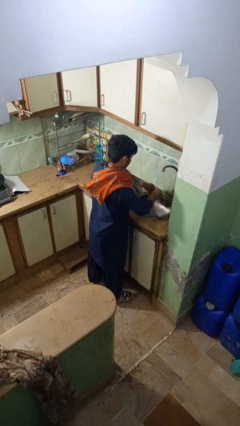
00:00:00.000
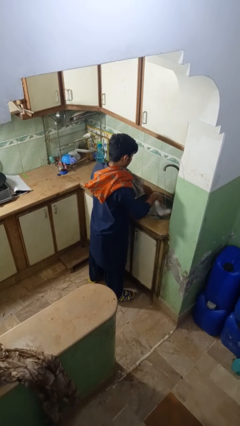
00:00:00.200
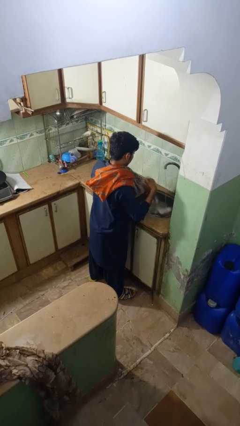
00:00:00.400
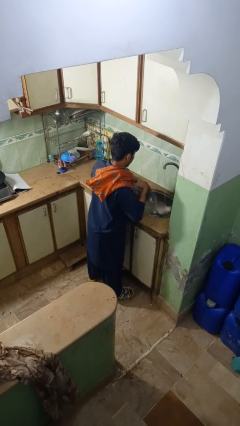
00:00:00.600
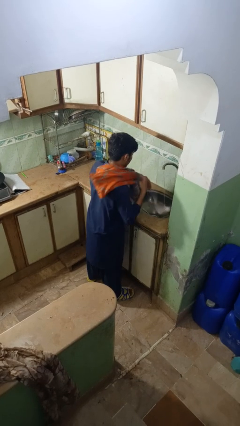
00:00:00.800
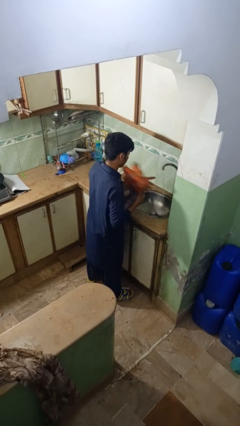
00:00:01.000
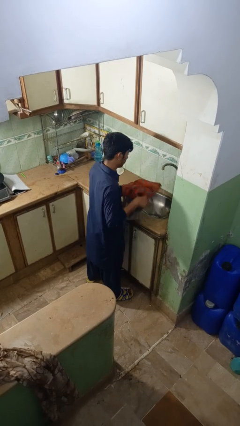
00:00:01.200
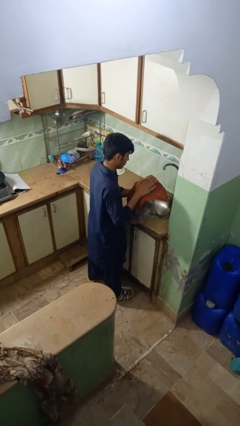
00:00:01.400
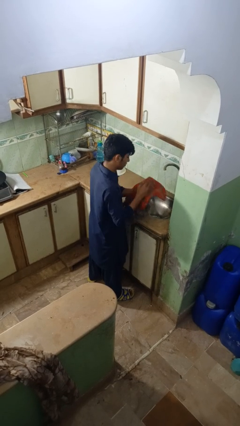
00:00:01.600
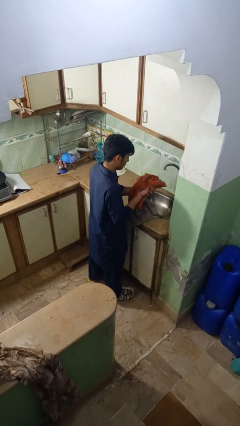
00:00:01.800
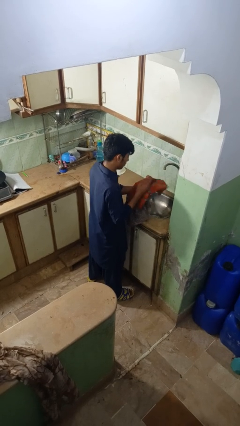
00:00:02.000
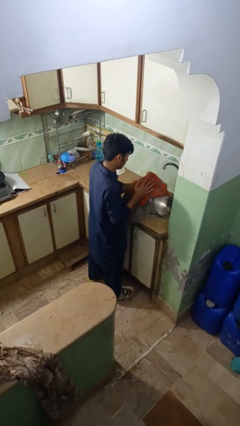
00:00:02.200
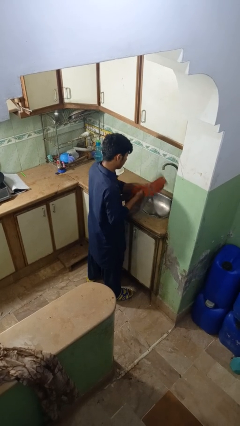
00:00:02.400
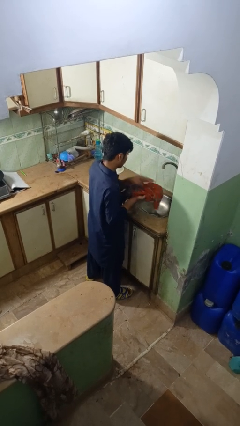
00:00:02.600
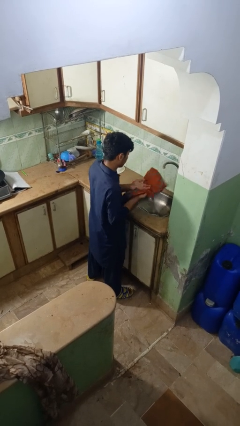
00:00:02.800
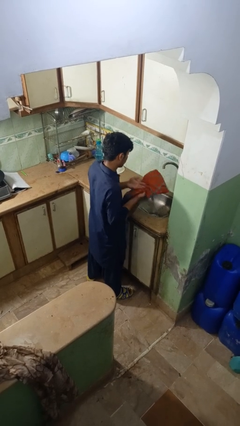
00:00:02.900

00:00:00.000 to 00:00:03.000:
person dries hands with towel

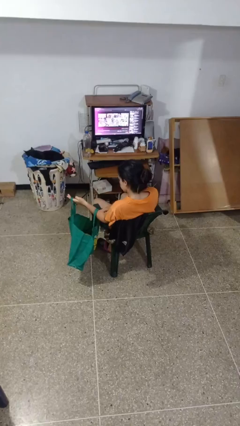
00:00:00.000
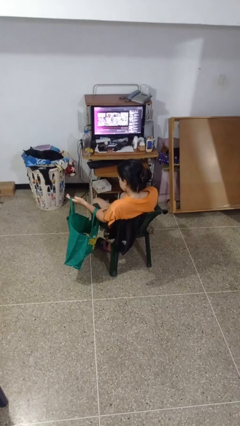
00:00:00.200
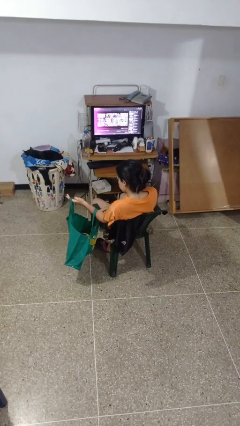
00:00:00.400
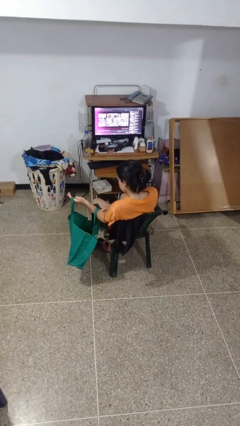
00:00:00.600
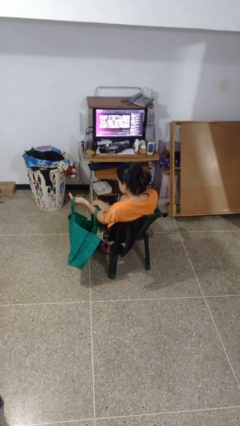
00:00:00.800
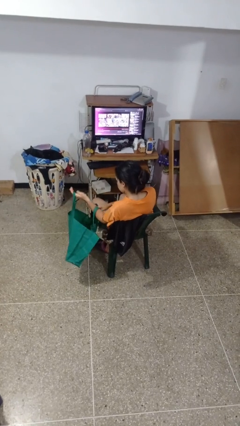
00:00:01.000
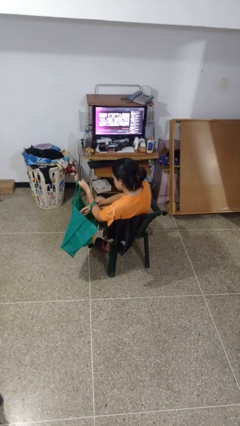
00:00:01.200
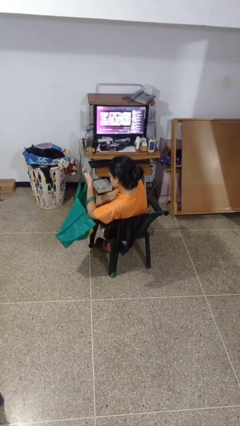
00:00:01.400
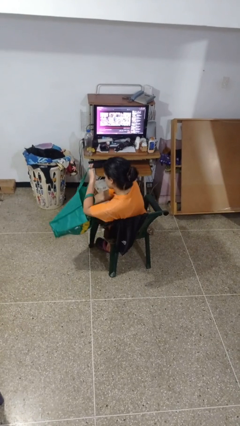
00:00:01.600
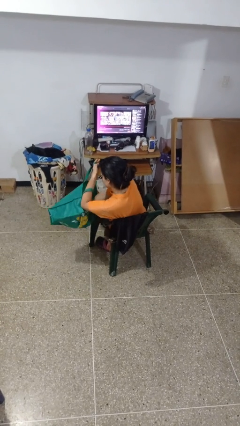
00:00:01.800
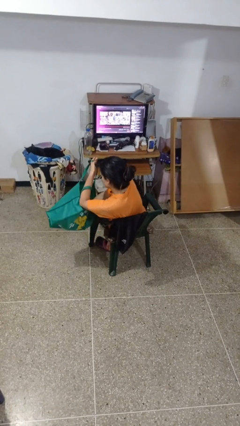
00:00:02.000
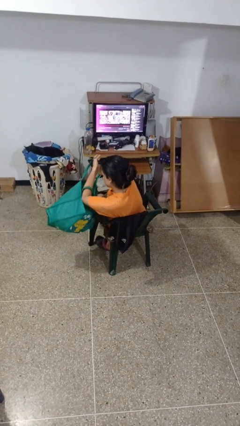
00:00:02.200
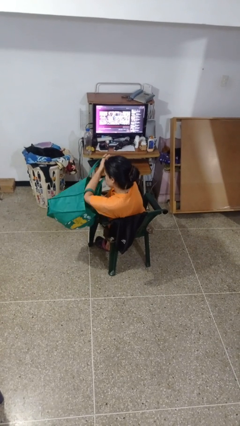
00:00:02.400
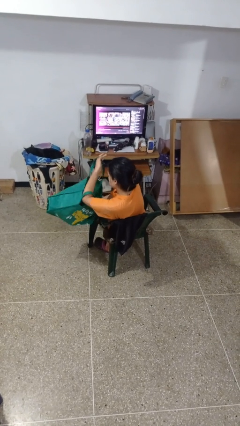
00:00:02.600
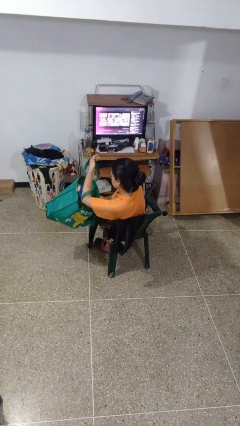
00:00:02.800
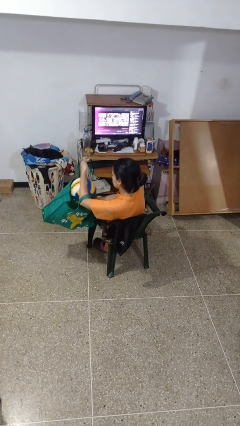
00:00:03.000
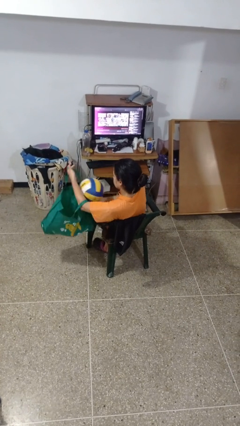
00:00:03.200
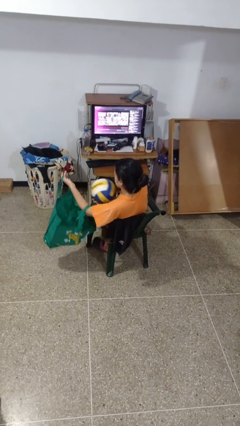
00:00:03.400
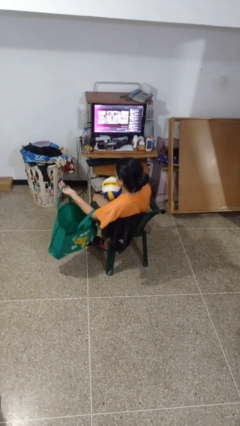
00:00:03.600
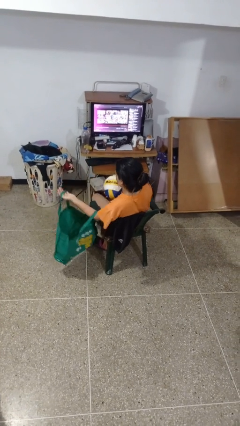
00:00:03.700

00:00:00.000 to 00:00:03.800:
person takes object from bag

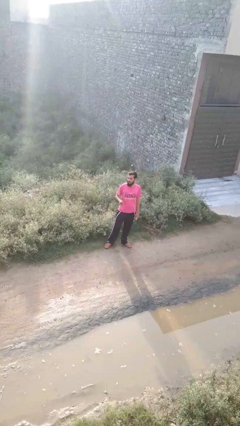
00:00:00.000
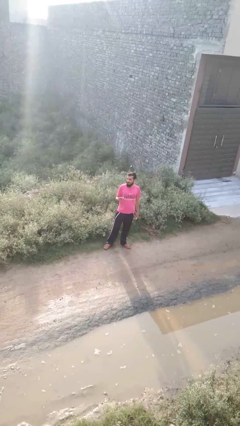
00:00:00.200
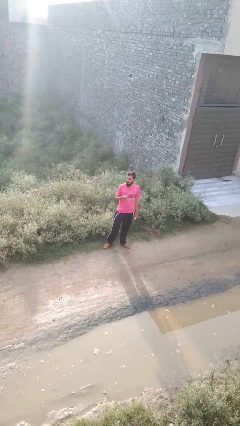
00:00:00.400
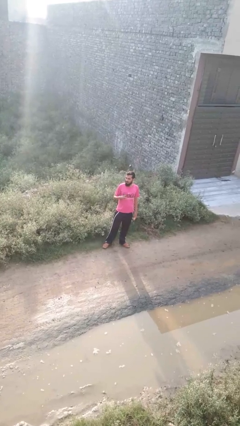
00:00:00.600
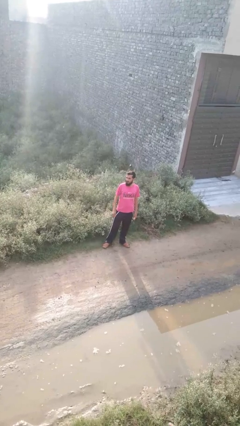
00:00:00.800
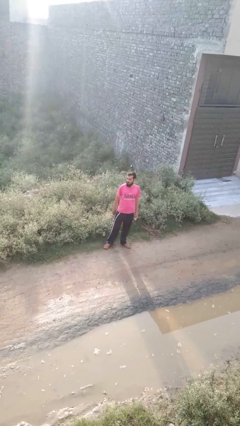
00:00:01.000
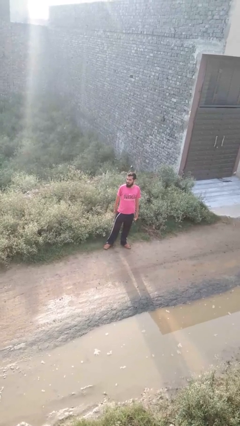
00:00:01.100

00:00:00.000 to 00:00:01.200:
person snaps fingers

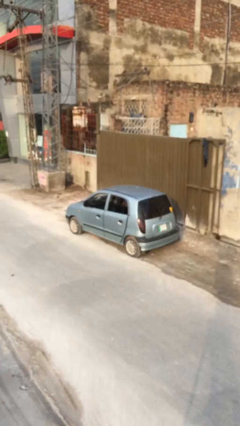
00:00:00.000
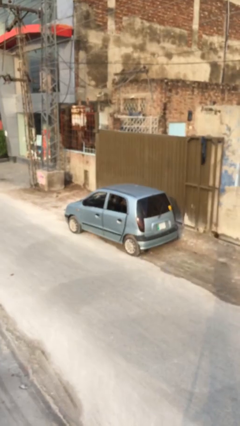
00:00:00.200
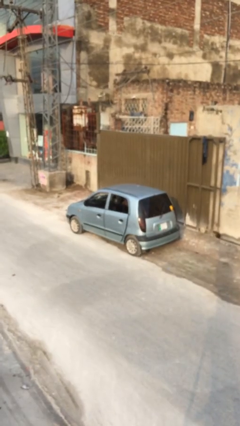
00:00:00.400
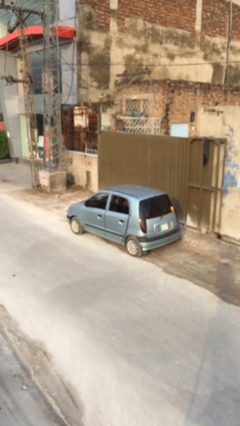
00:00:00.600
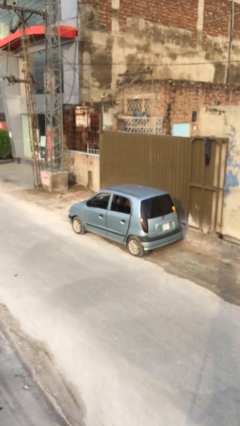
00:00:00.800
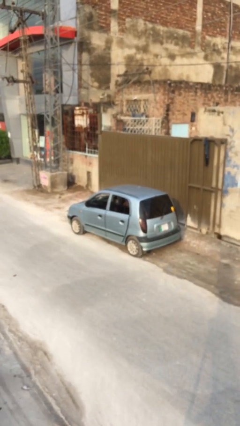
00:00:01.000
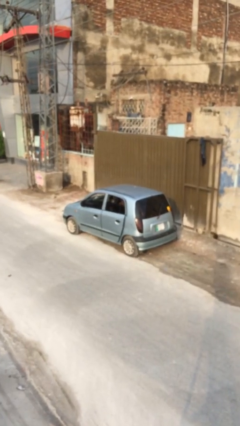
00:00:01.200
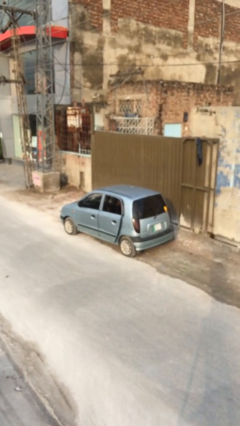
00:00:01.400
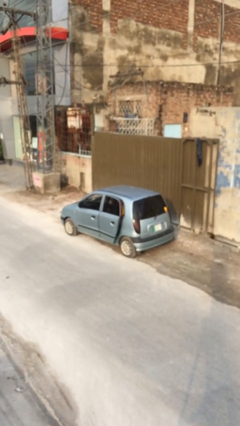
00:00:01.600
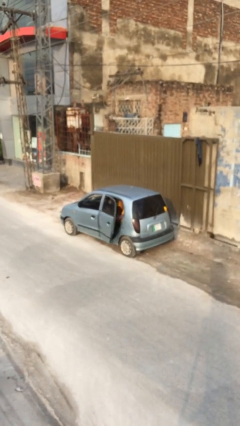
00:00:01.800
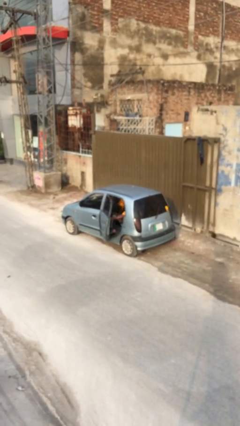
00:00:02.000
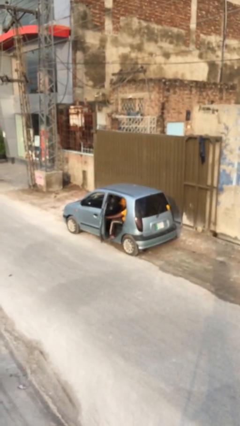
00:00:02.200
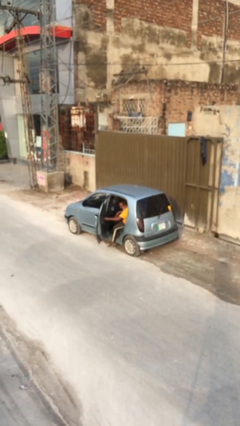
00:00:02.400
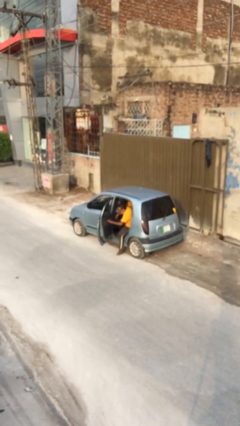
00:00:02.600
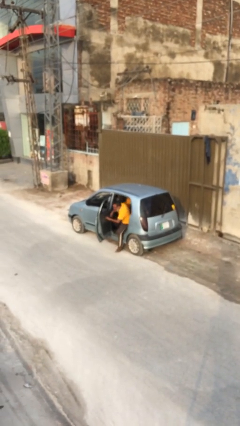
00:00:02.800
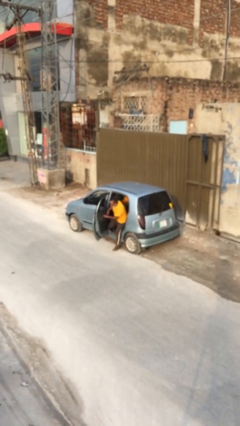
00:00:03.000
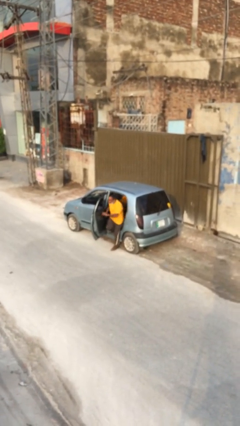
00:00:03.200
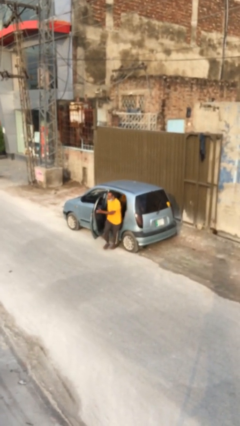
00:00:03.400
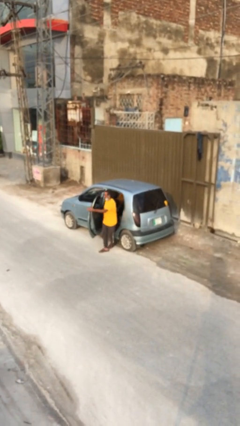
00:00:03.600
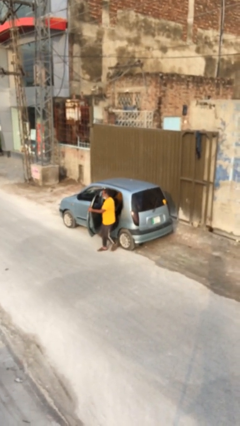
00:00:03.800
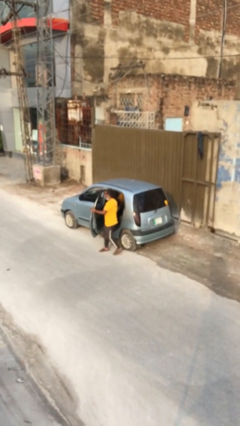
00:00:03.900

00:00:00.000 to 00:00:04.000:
car drops off person

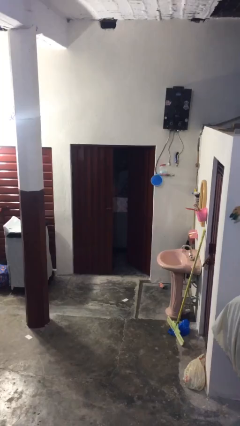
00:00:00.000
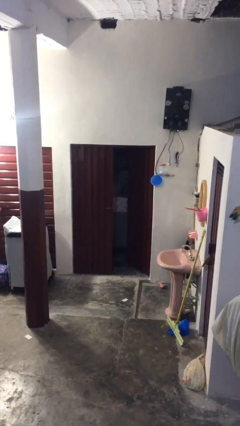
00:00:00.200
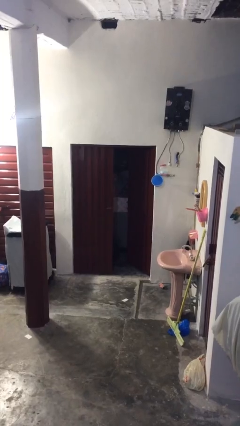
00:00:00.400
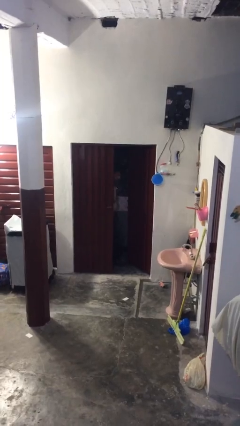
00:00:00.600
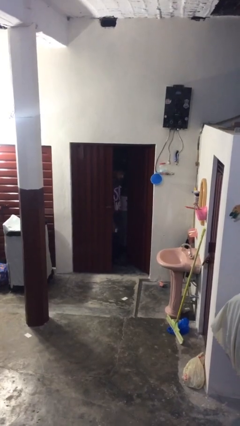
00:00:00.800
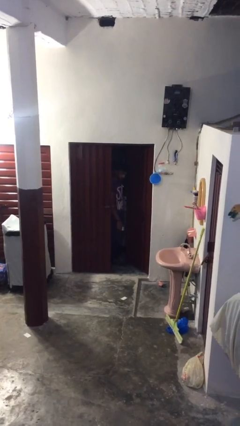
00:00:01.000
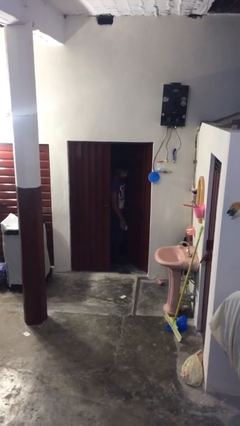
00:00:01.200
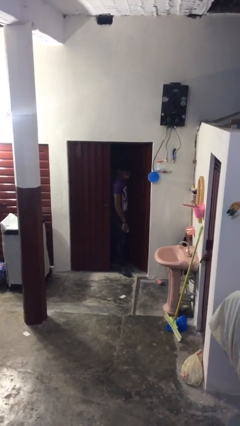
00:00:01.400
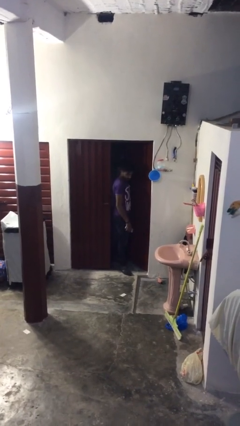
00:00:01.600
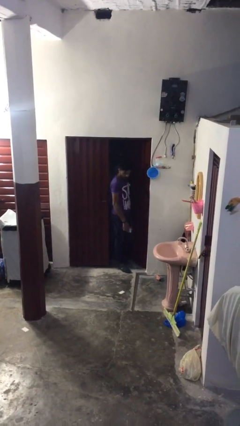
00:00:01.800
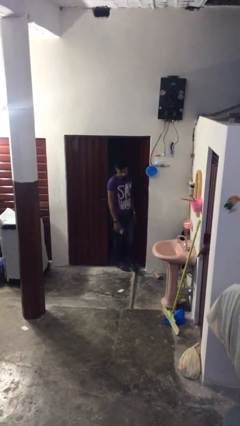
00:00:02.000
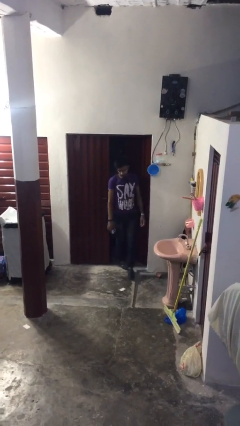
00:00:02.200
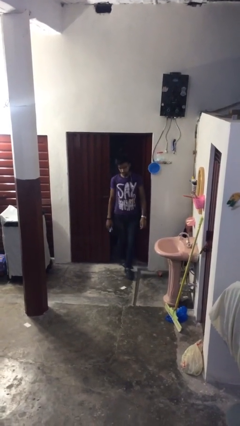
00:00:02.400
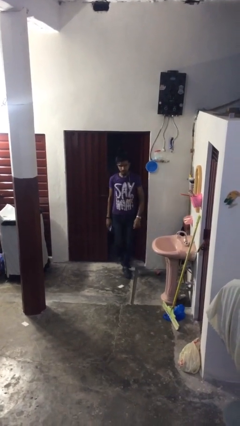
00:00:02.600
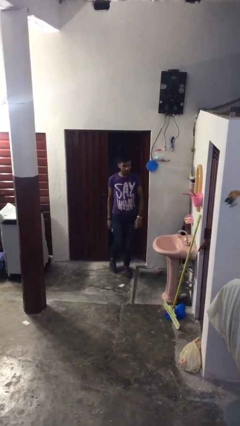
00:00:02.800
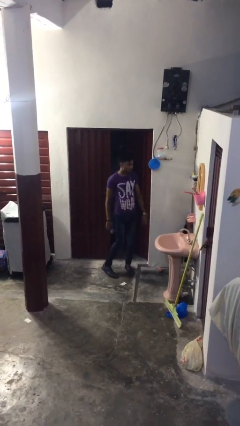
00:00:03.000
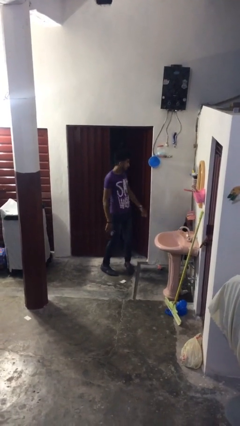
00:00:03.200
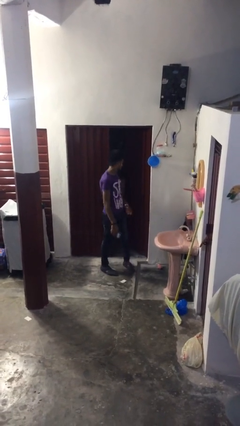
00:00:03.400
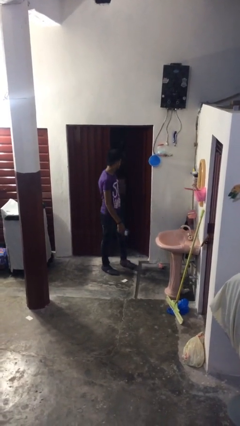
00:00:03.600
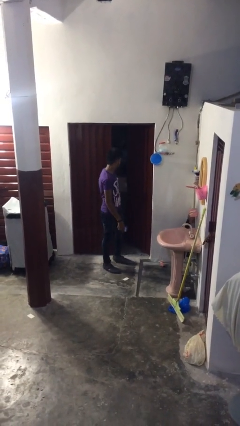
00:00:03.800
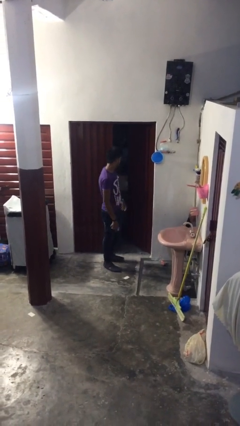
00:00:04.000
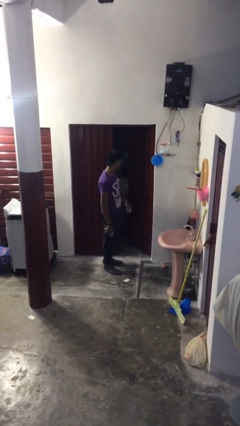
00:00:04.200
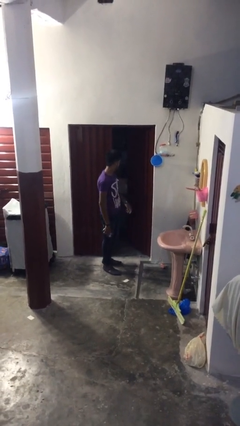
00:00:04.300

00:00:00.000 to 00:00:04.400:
person enters scene through structure

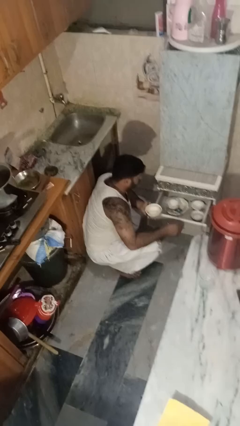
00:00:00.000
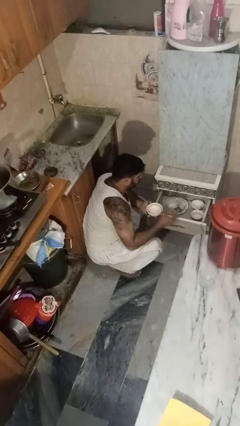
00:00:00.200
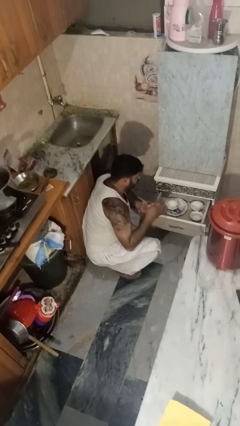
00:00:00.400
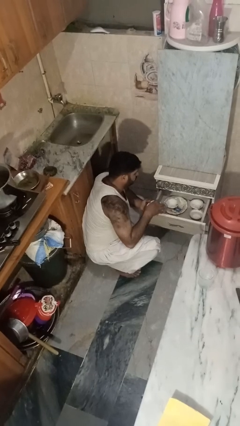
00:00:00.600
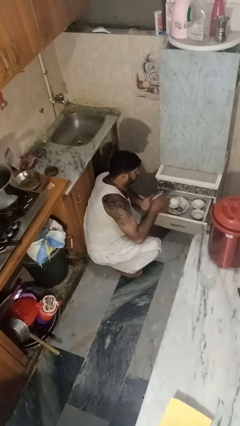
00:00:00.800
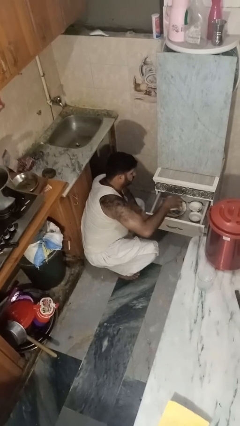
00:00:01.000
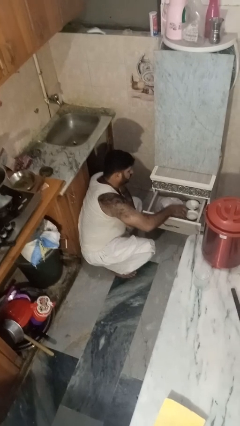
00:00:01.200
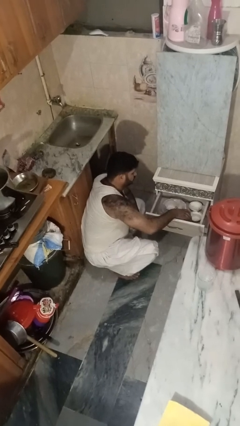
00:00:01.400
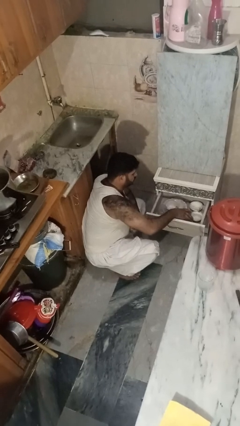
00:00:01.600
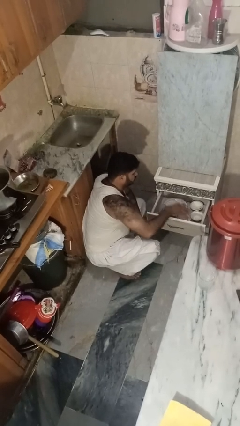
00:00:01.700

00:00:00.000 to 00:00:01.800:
person puts object into kitchen drawer
